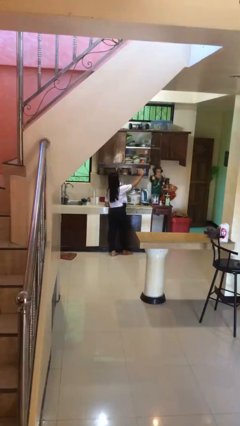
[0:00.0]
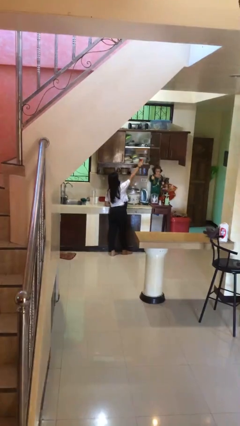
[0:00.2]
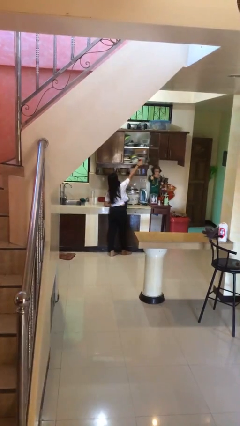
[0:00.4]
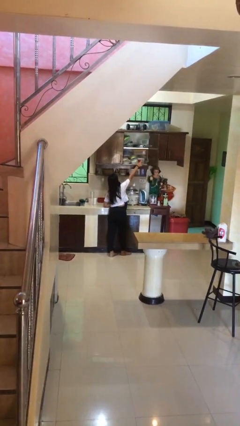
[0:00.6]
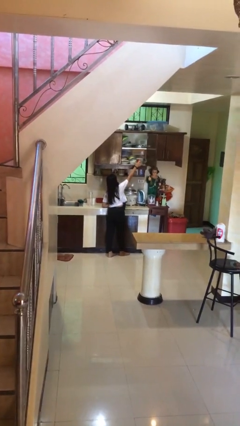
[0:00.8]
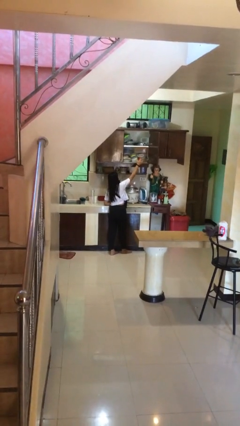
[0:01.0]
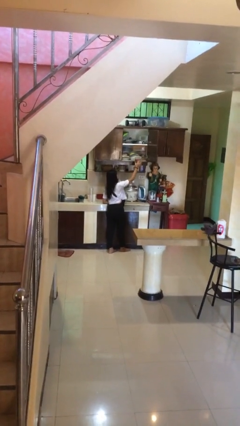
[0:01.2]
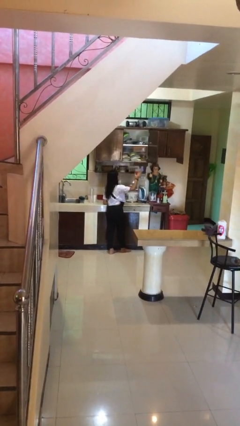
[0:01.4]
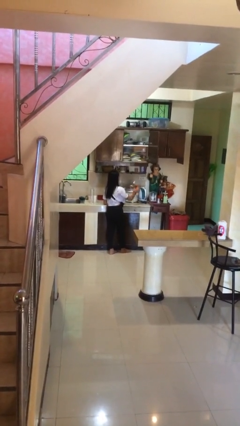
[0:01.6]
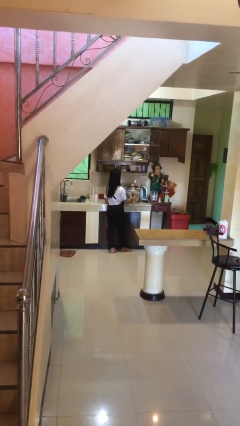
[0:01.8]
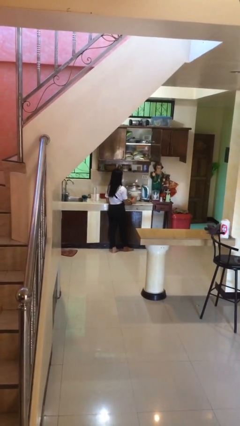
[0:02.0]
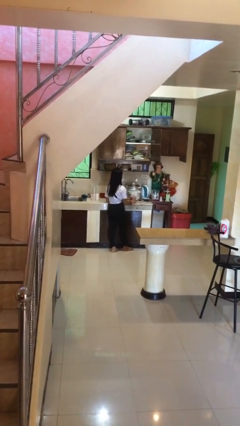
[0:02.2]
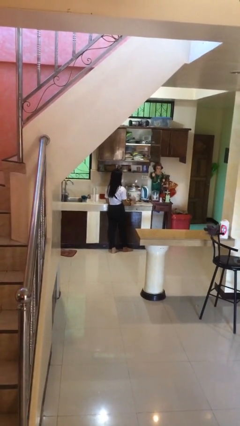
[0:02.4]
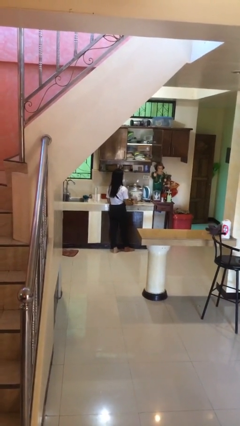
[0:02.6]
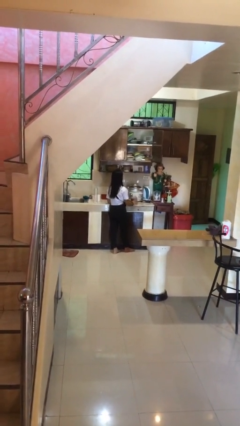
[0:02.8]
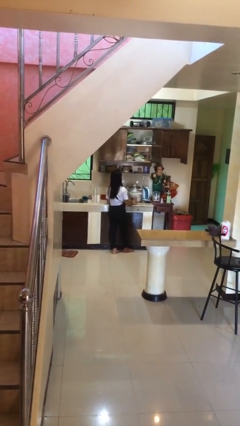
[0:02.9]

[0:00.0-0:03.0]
person picks up object from shelf

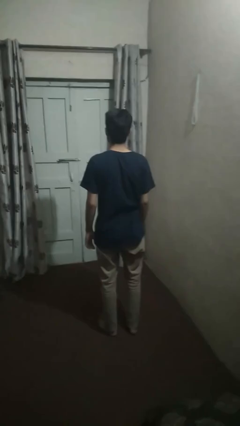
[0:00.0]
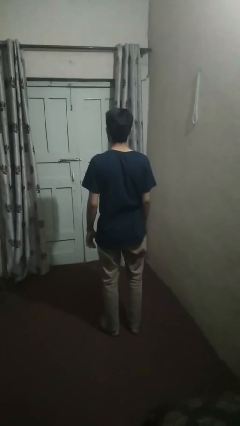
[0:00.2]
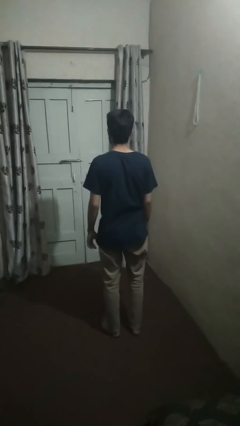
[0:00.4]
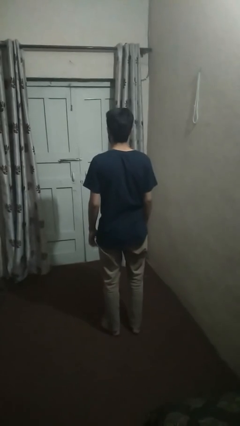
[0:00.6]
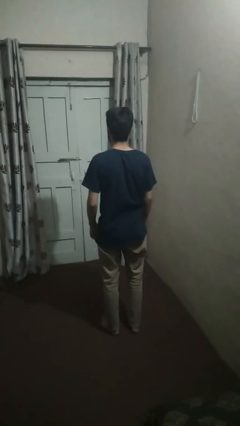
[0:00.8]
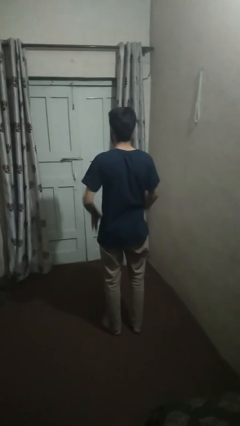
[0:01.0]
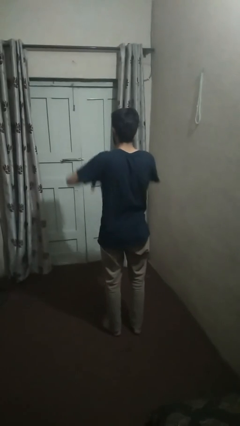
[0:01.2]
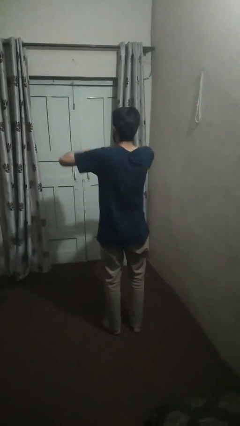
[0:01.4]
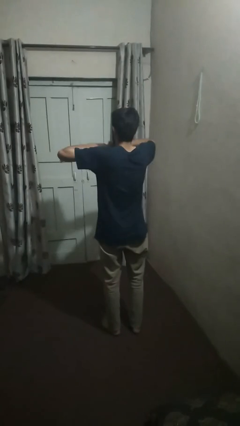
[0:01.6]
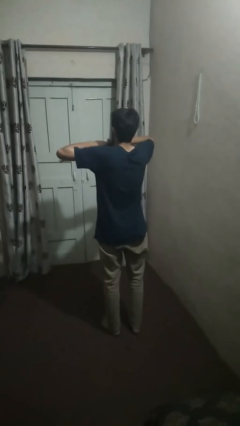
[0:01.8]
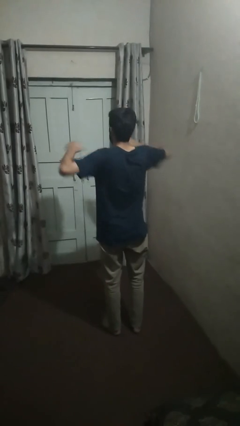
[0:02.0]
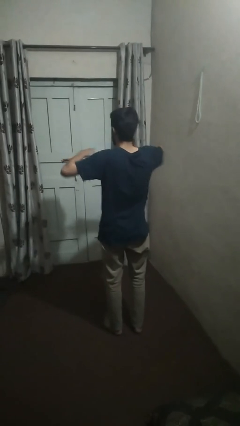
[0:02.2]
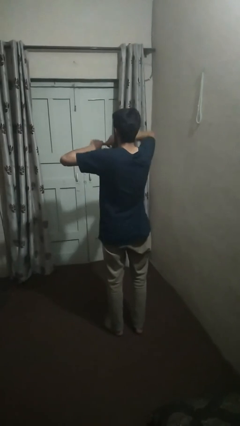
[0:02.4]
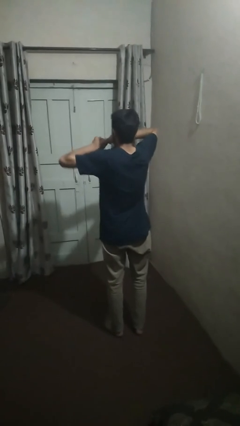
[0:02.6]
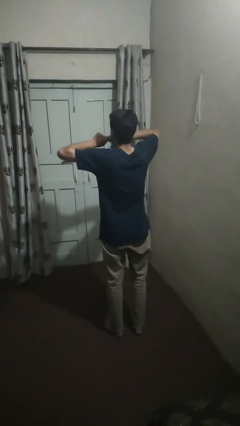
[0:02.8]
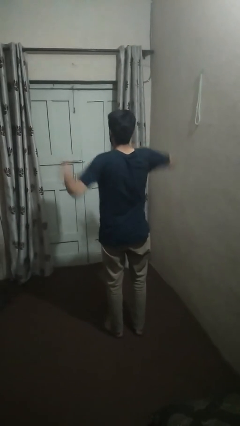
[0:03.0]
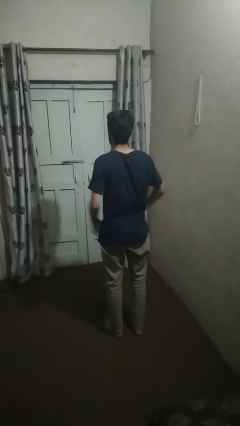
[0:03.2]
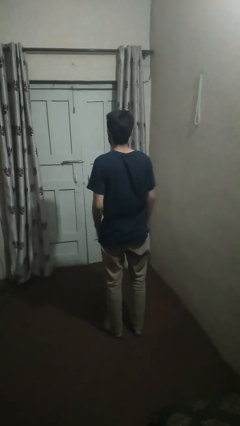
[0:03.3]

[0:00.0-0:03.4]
person snaps fingers

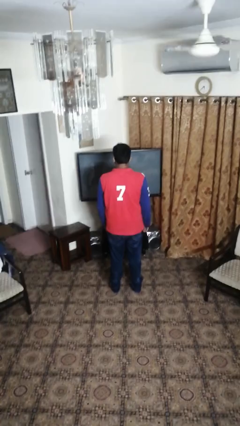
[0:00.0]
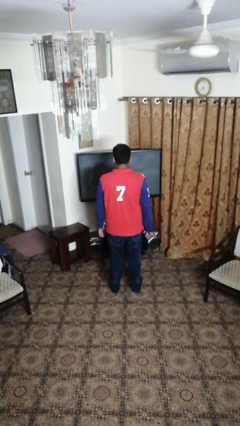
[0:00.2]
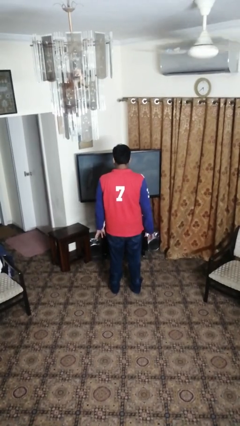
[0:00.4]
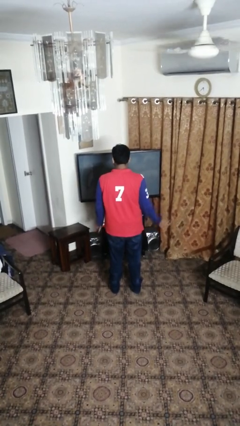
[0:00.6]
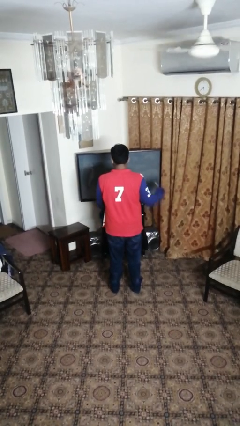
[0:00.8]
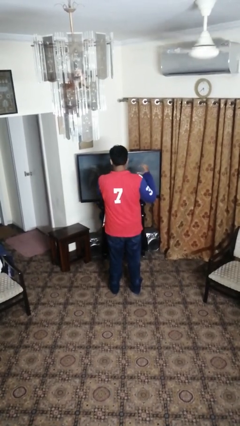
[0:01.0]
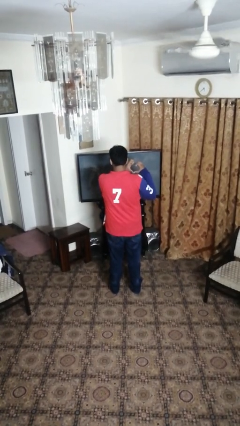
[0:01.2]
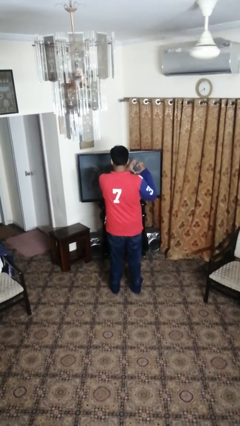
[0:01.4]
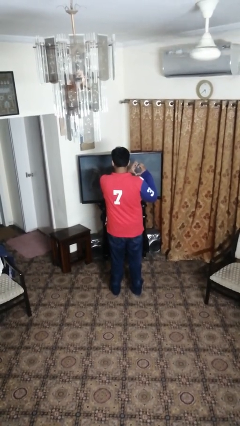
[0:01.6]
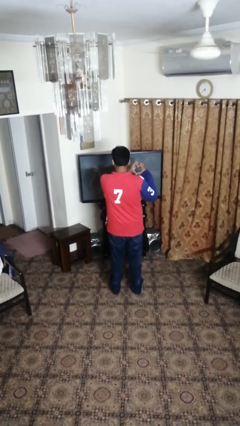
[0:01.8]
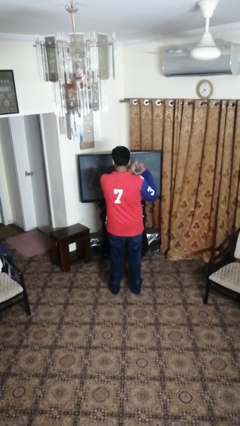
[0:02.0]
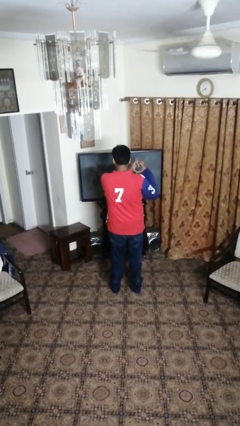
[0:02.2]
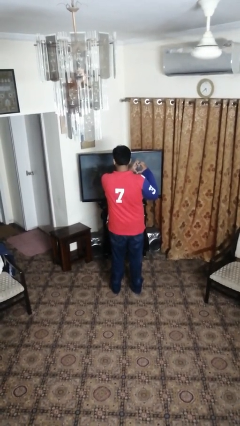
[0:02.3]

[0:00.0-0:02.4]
person gestures heart

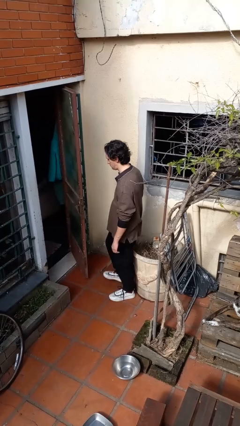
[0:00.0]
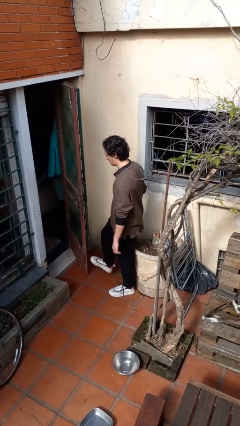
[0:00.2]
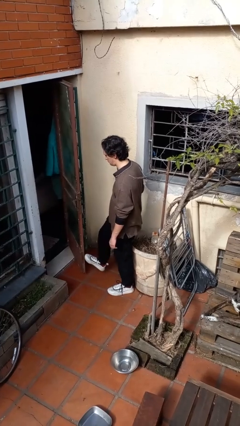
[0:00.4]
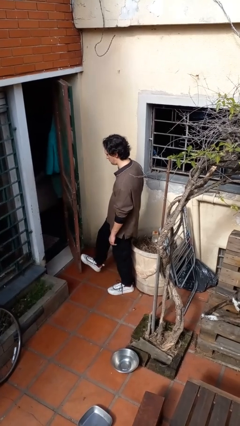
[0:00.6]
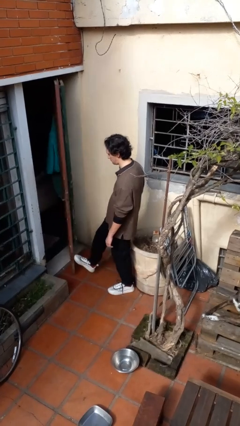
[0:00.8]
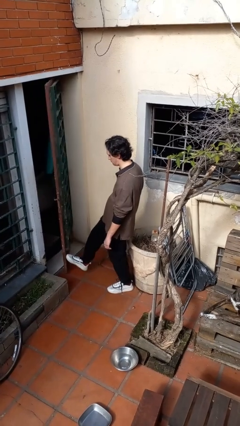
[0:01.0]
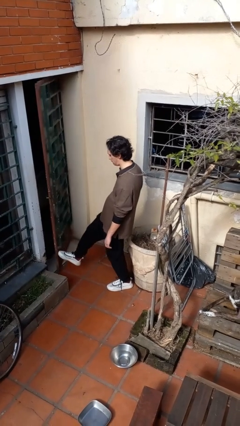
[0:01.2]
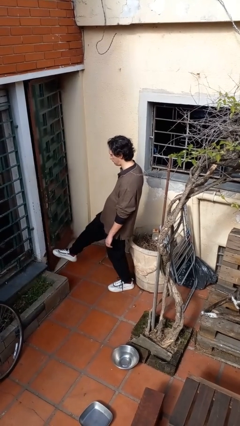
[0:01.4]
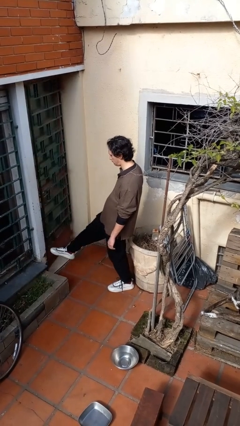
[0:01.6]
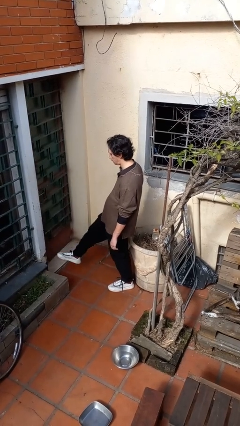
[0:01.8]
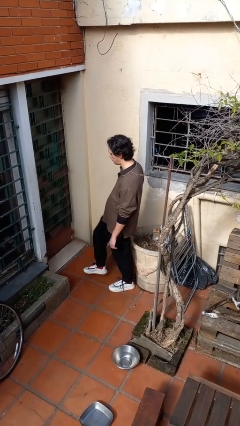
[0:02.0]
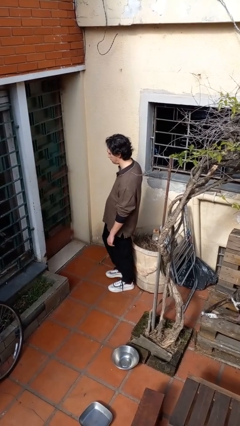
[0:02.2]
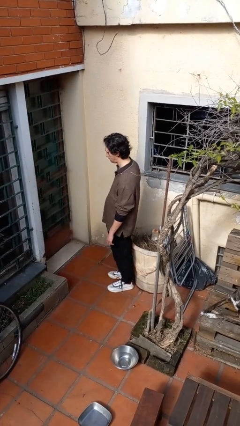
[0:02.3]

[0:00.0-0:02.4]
person closes door with foot

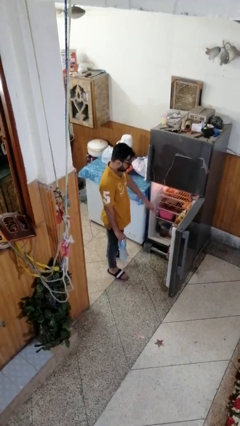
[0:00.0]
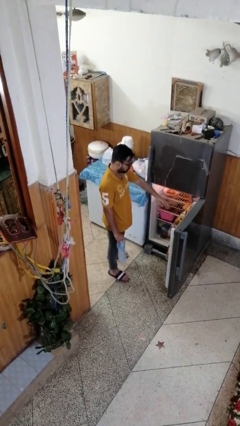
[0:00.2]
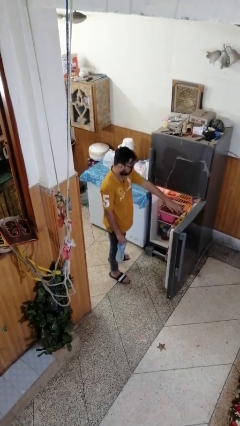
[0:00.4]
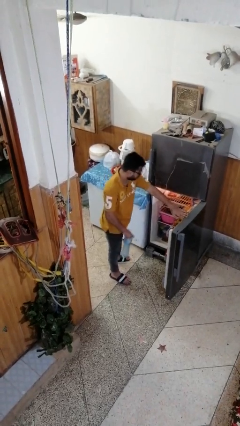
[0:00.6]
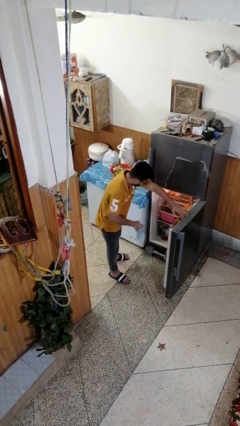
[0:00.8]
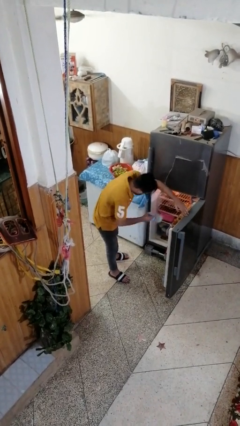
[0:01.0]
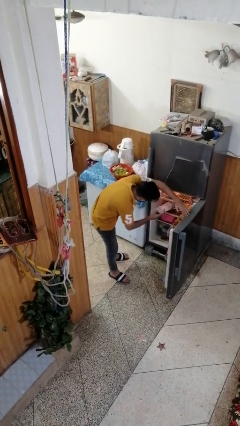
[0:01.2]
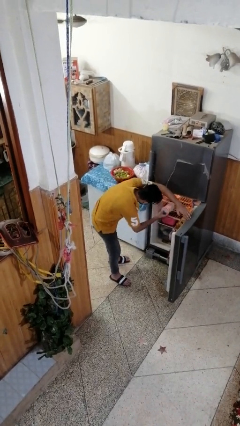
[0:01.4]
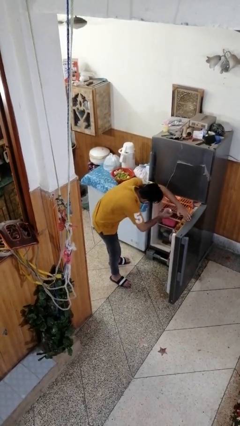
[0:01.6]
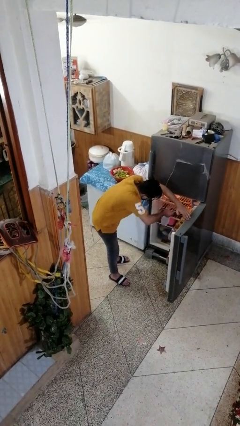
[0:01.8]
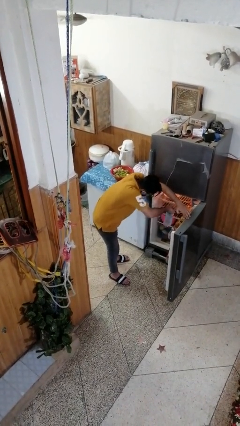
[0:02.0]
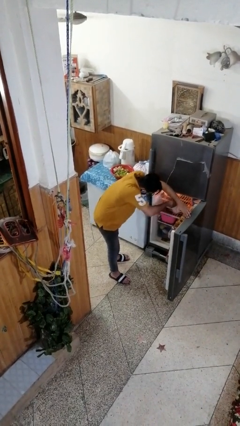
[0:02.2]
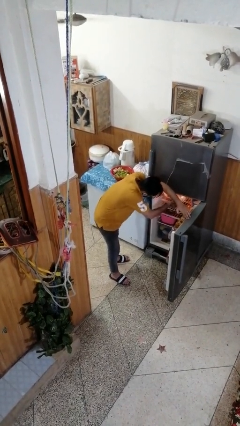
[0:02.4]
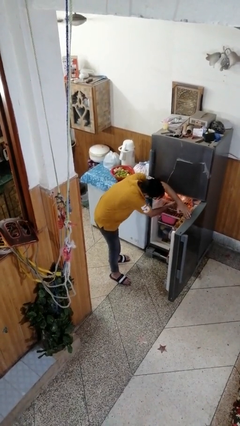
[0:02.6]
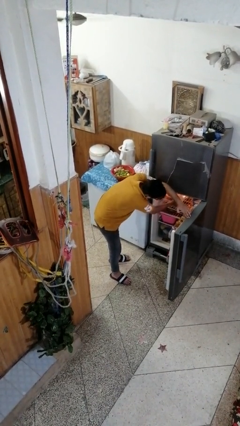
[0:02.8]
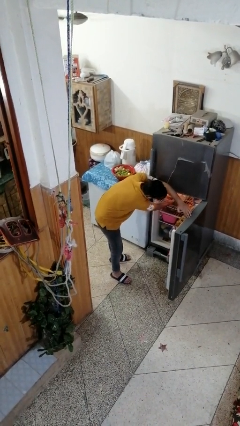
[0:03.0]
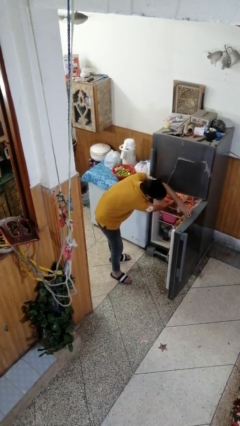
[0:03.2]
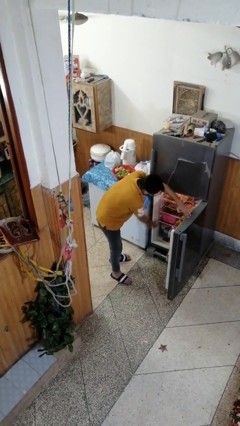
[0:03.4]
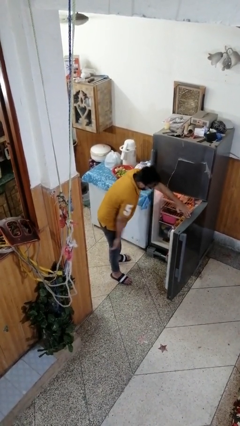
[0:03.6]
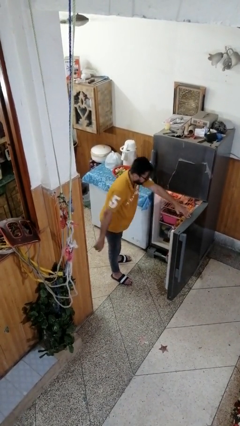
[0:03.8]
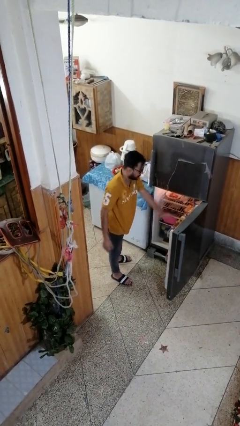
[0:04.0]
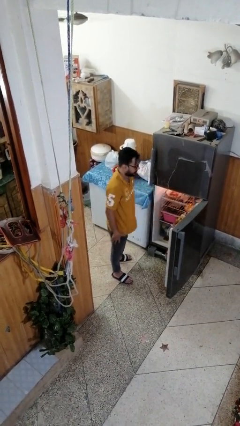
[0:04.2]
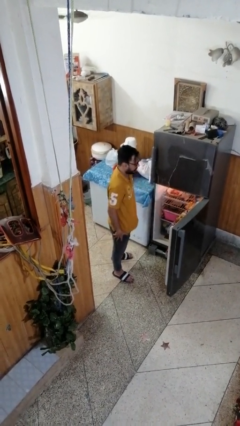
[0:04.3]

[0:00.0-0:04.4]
person puts object into refrigerator

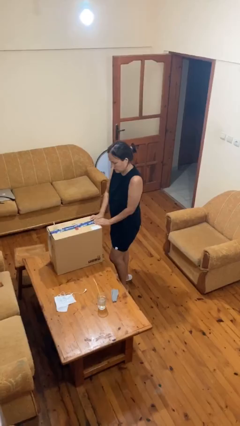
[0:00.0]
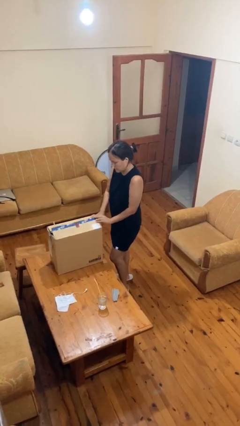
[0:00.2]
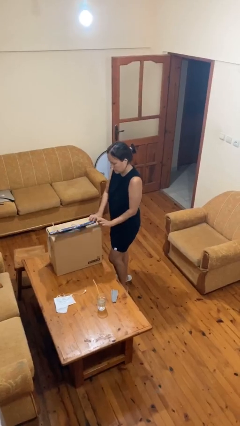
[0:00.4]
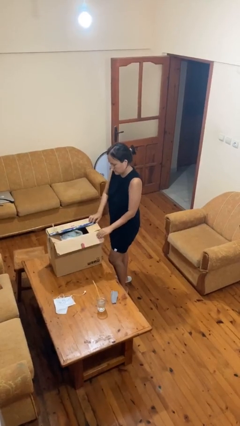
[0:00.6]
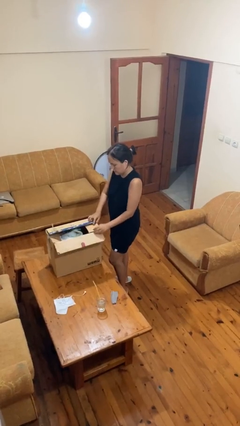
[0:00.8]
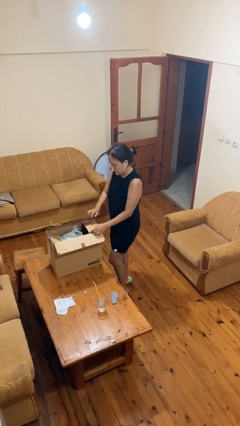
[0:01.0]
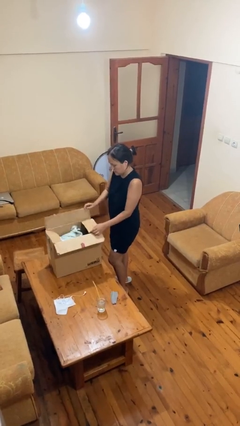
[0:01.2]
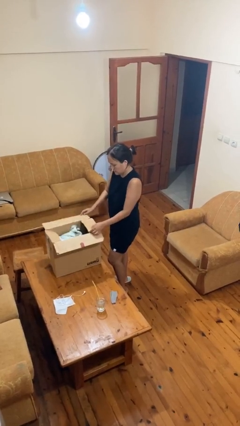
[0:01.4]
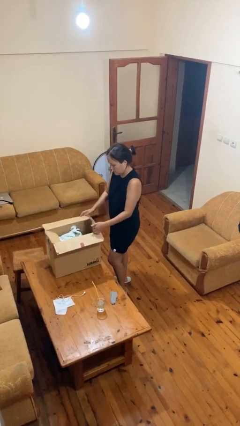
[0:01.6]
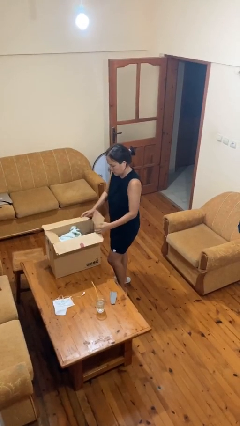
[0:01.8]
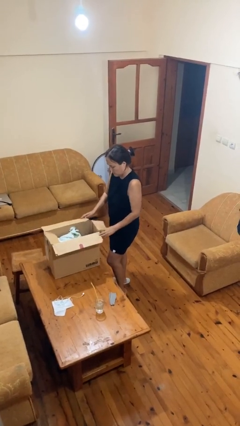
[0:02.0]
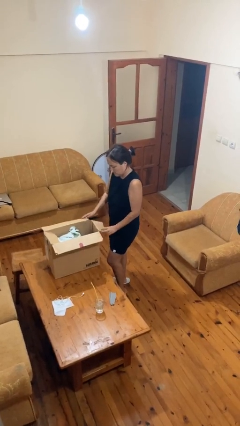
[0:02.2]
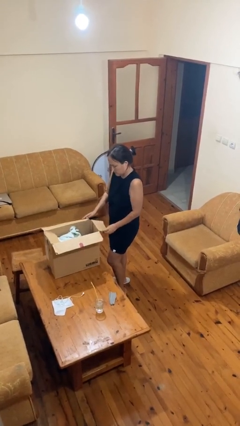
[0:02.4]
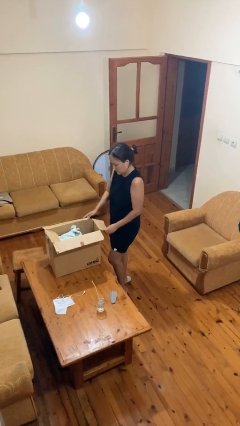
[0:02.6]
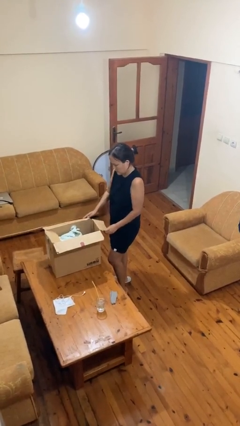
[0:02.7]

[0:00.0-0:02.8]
person opens box
